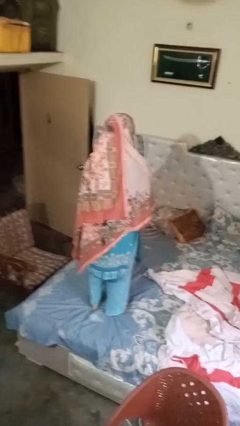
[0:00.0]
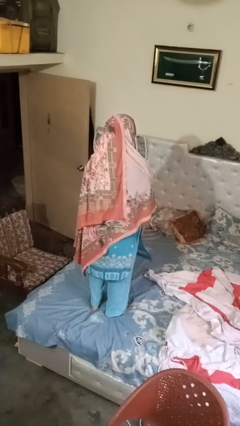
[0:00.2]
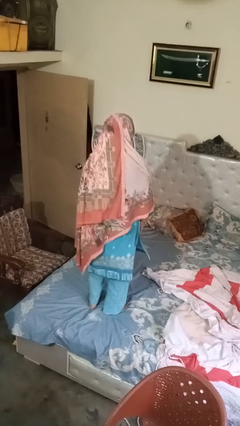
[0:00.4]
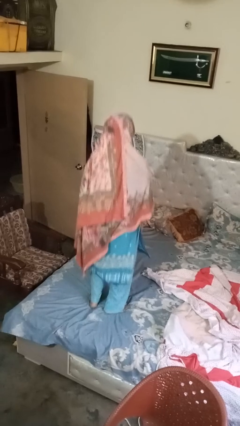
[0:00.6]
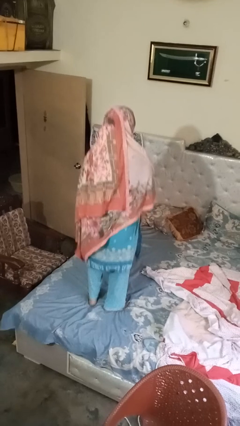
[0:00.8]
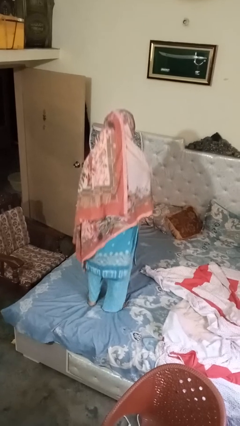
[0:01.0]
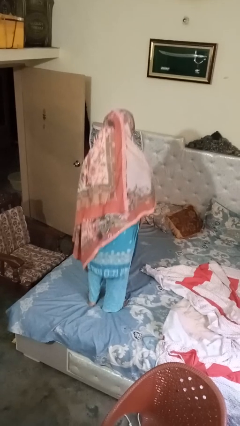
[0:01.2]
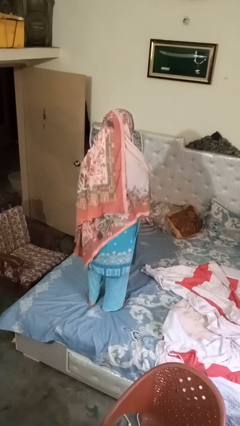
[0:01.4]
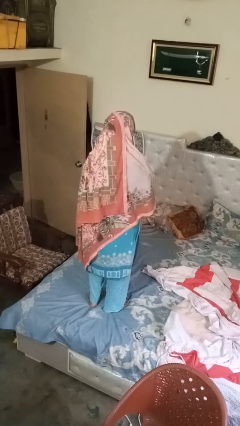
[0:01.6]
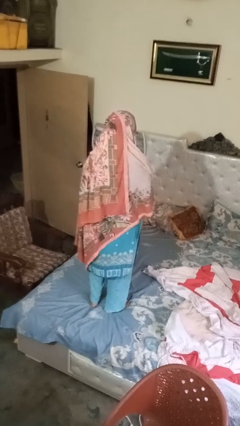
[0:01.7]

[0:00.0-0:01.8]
person jumps on bed

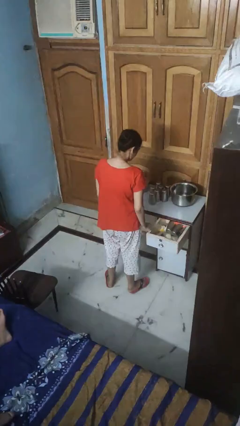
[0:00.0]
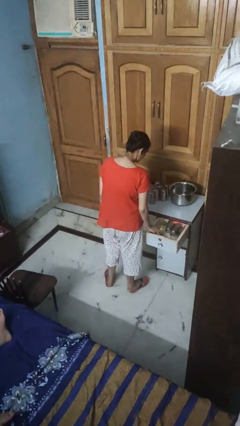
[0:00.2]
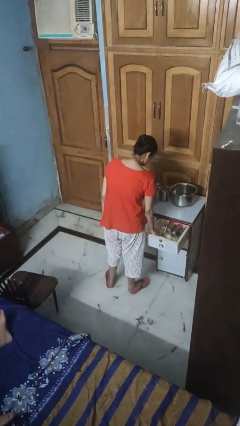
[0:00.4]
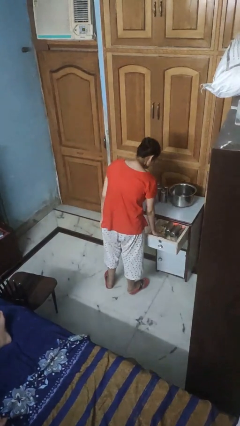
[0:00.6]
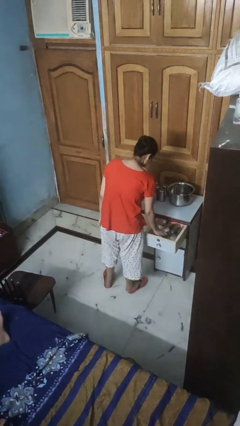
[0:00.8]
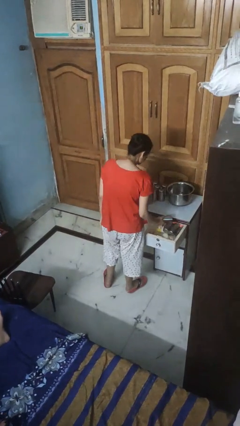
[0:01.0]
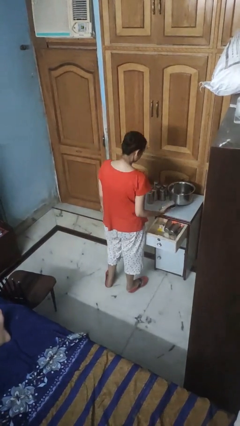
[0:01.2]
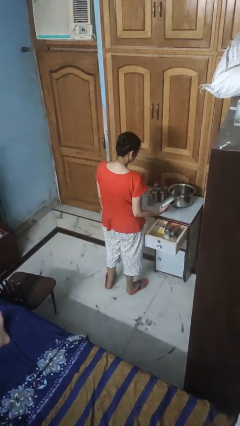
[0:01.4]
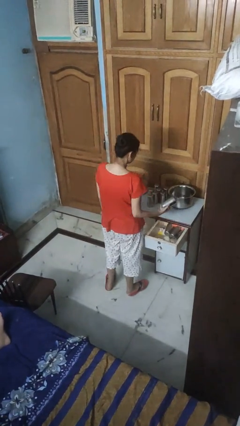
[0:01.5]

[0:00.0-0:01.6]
person takes object from kitchen drawer

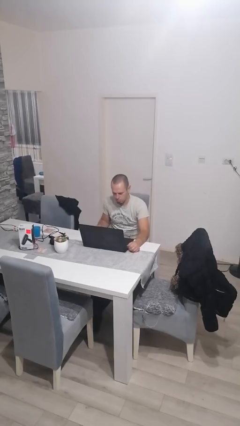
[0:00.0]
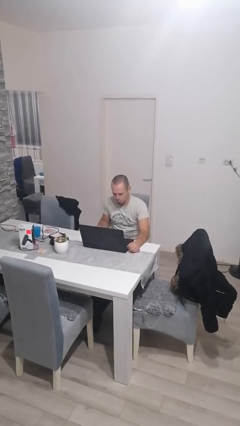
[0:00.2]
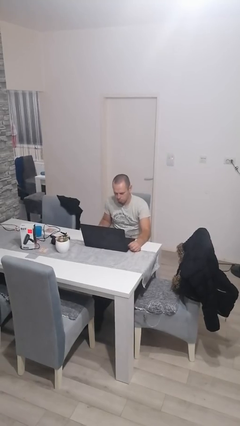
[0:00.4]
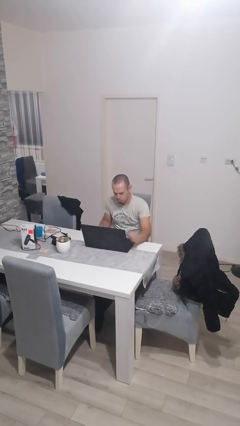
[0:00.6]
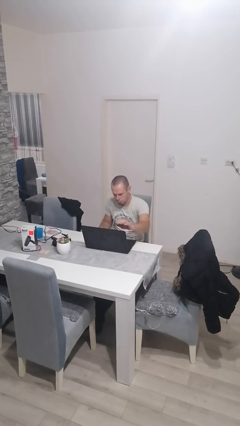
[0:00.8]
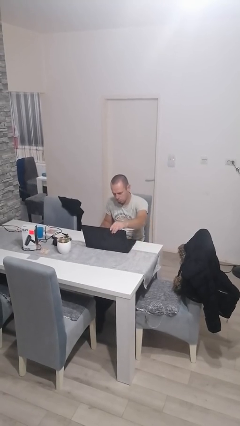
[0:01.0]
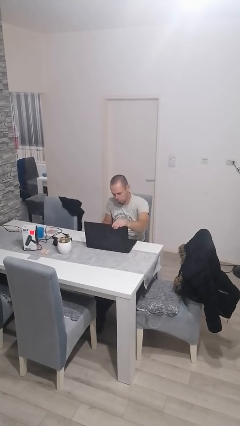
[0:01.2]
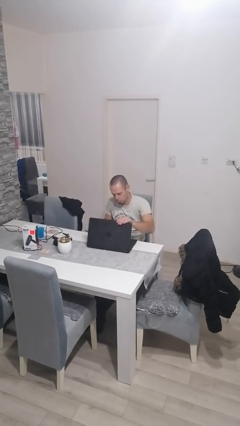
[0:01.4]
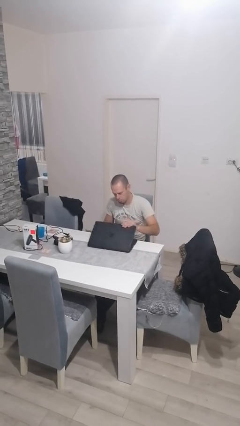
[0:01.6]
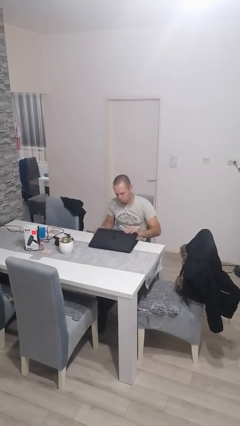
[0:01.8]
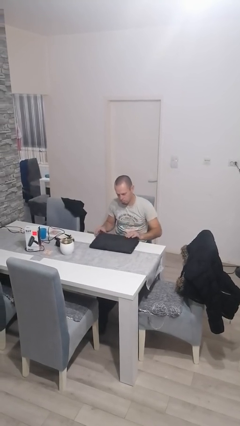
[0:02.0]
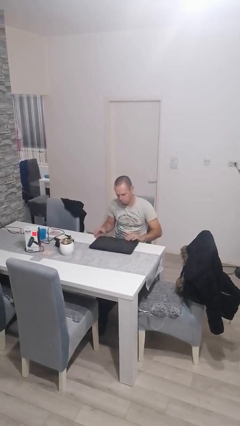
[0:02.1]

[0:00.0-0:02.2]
person closes laptop

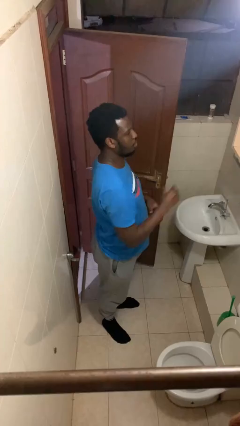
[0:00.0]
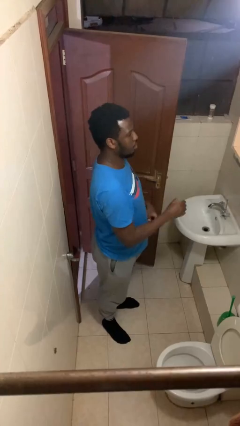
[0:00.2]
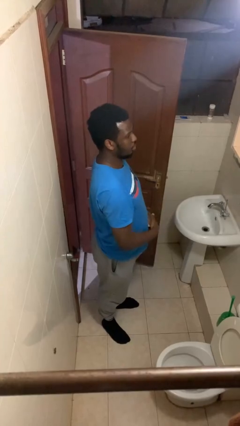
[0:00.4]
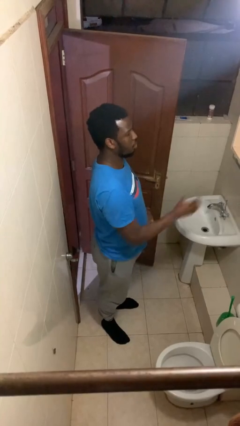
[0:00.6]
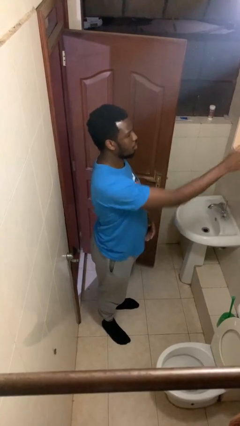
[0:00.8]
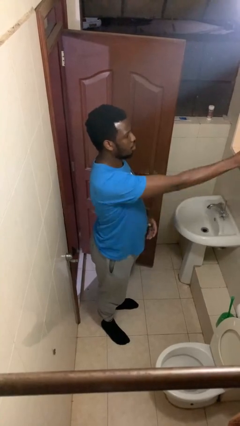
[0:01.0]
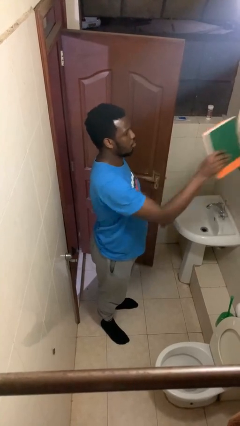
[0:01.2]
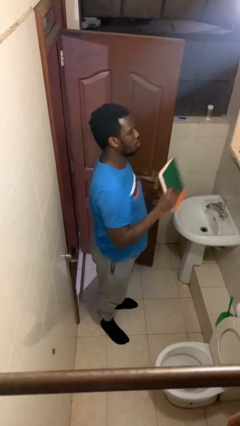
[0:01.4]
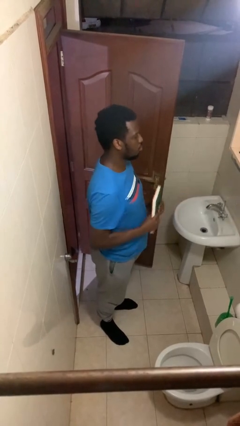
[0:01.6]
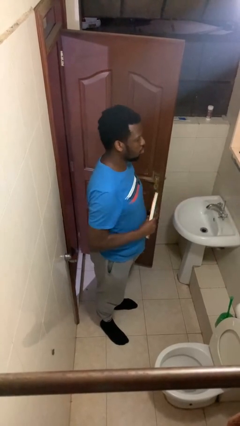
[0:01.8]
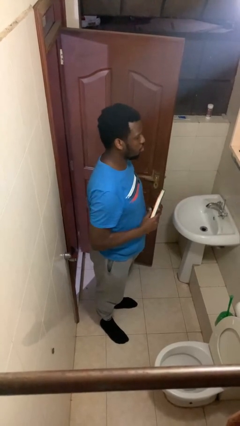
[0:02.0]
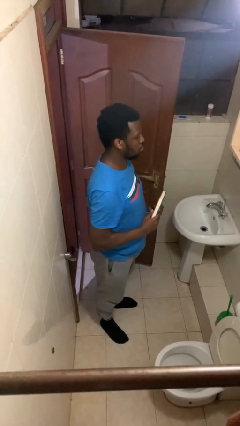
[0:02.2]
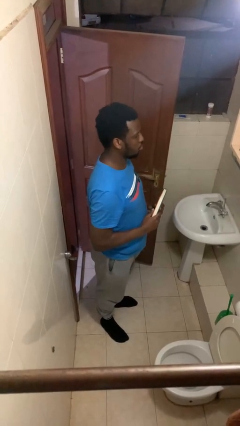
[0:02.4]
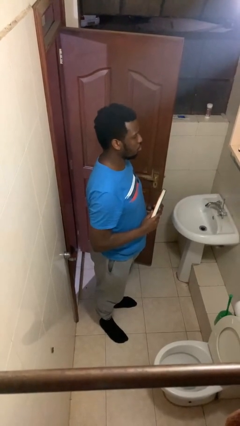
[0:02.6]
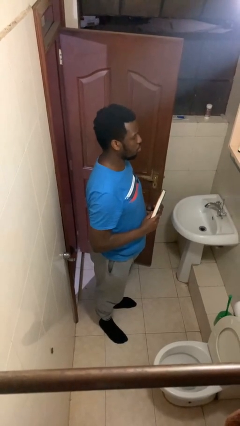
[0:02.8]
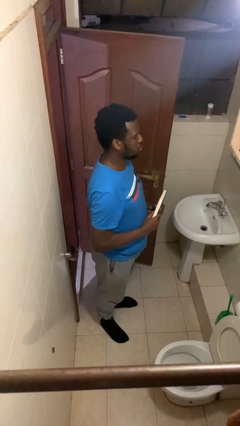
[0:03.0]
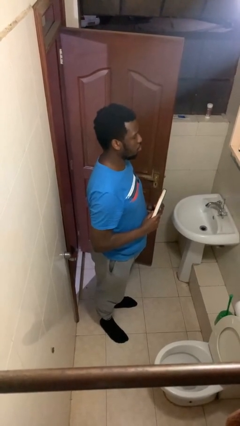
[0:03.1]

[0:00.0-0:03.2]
person picks up object from cabinet

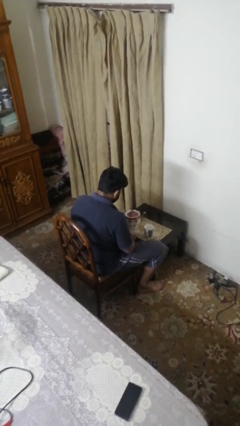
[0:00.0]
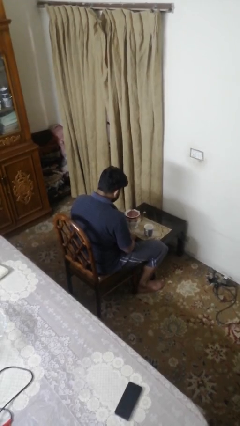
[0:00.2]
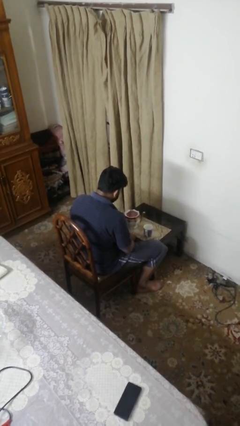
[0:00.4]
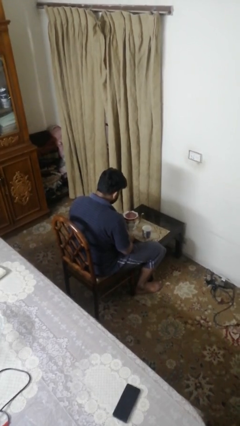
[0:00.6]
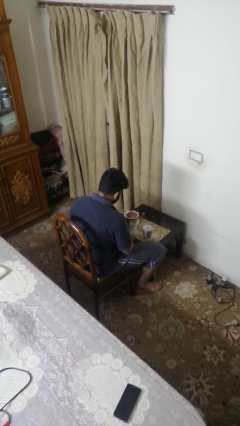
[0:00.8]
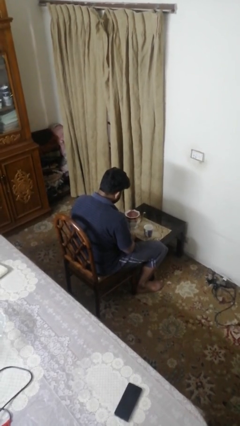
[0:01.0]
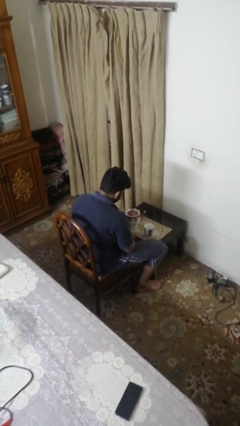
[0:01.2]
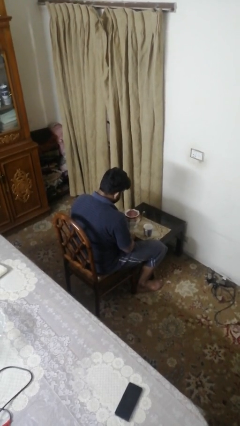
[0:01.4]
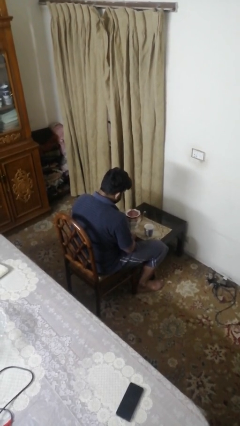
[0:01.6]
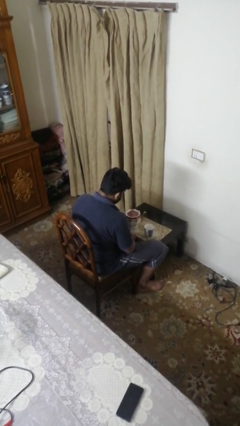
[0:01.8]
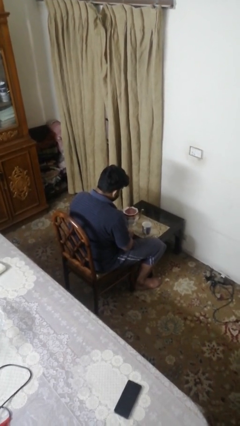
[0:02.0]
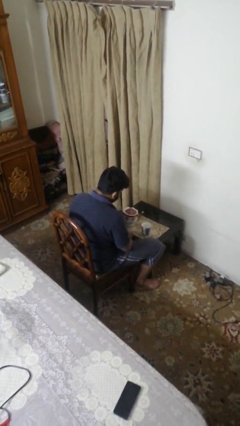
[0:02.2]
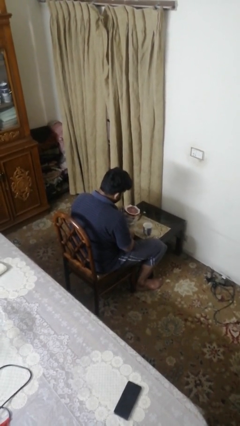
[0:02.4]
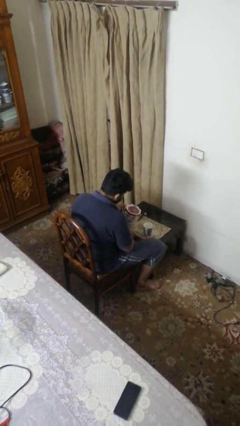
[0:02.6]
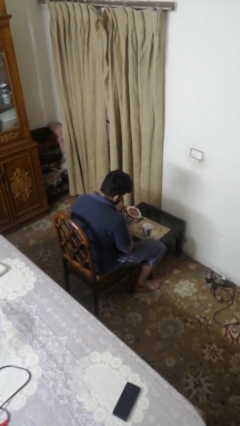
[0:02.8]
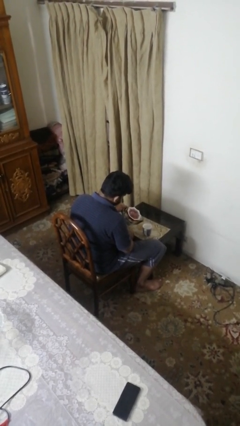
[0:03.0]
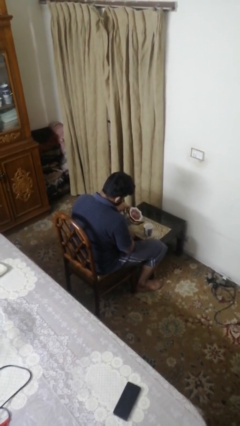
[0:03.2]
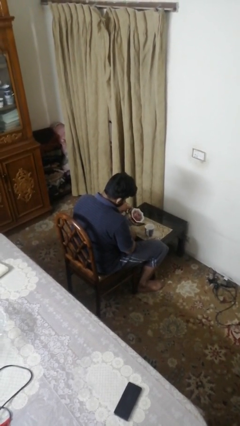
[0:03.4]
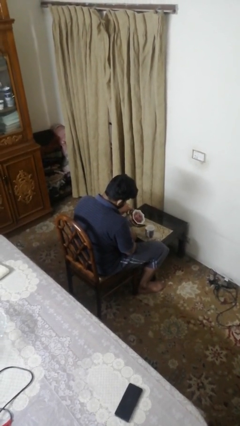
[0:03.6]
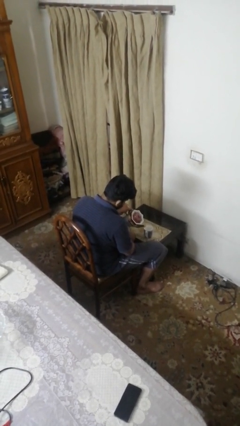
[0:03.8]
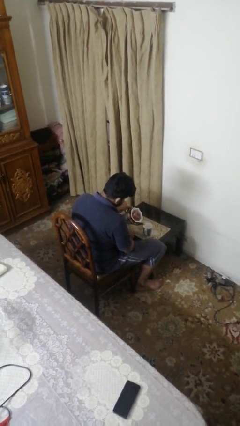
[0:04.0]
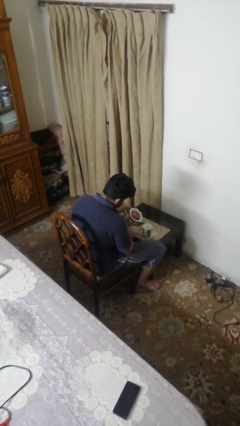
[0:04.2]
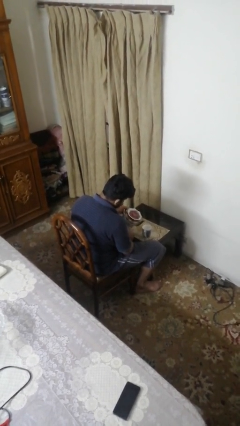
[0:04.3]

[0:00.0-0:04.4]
person pours coffee into mug

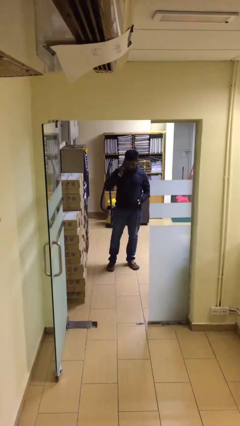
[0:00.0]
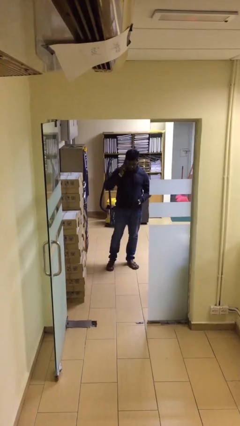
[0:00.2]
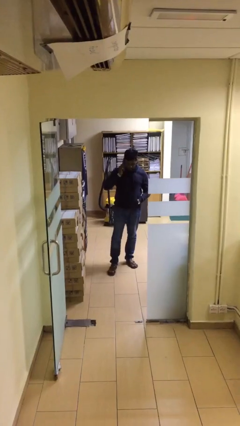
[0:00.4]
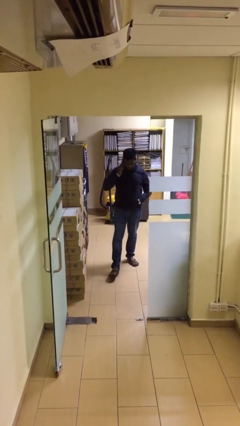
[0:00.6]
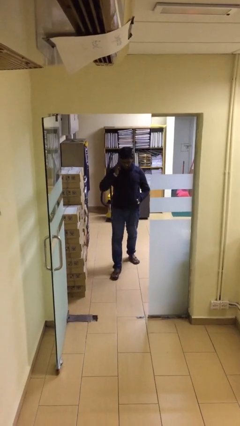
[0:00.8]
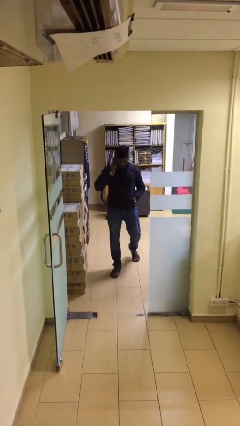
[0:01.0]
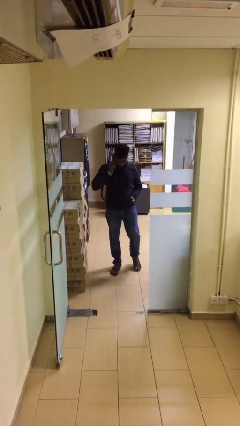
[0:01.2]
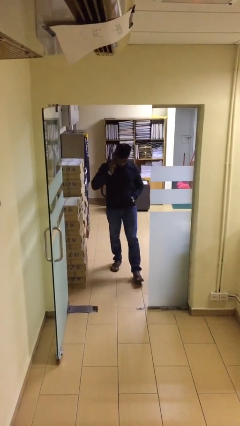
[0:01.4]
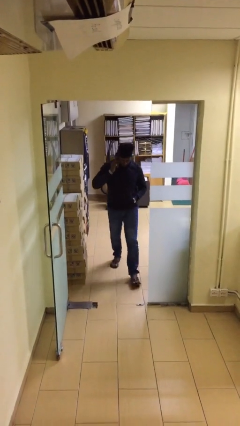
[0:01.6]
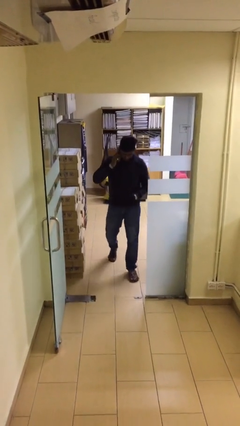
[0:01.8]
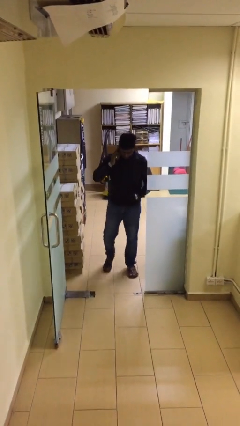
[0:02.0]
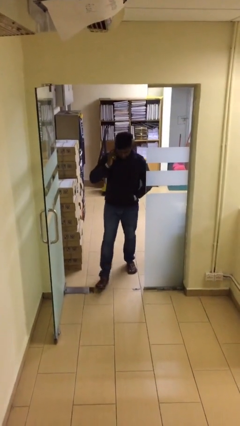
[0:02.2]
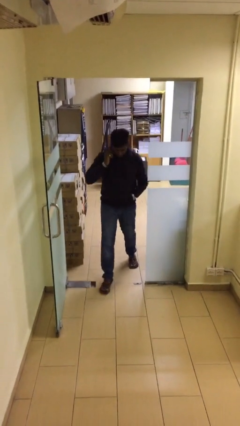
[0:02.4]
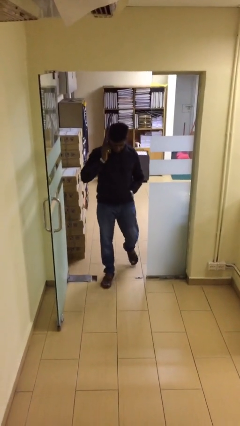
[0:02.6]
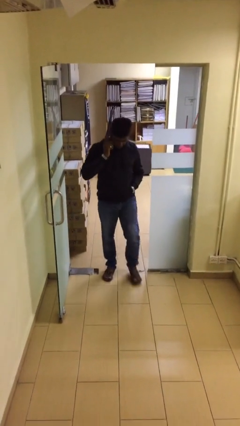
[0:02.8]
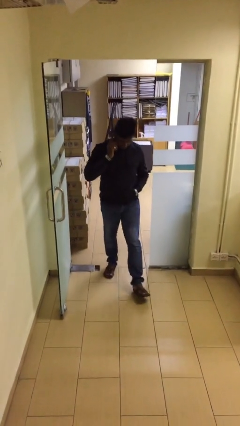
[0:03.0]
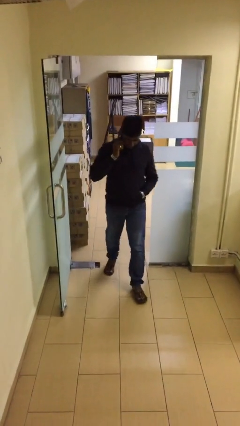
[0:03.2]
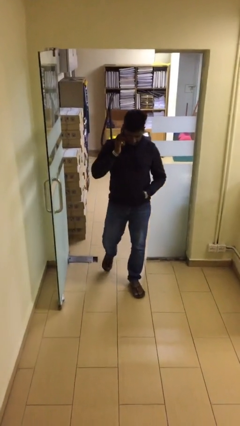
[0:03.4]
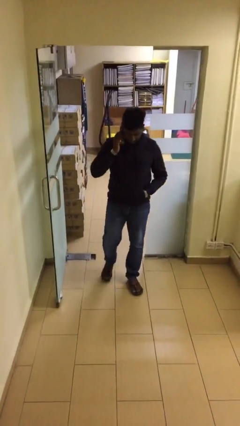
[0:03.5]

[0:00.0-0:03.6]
person enters scene through structure

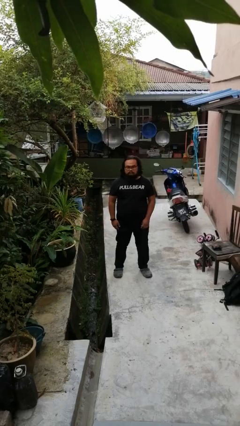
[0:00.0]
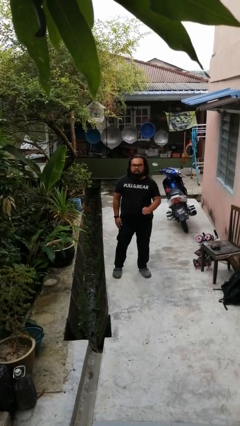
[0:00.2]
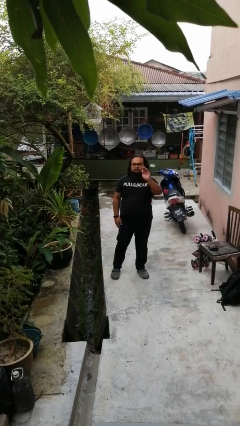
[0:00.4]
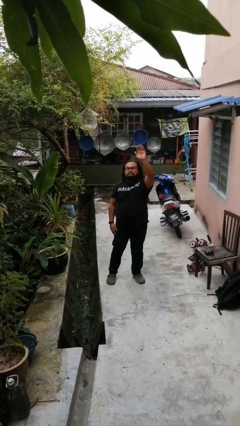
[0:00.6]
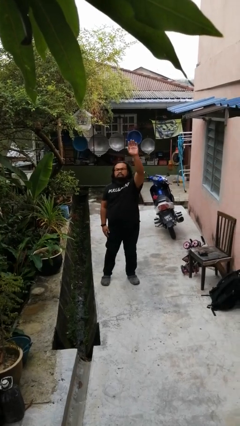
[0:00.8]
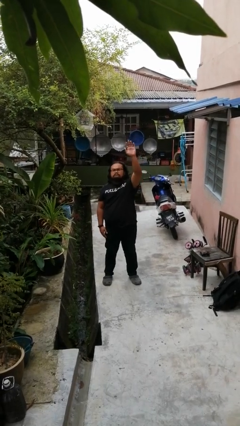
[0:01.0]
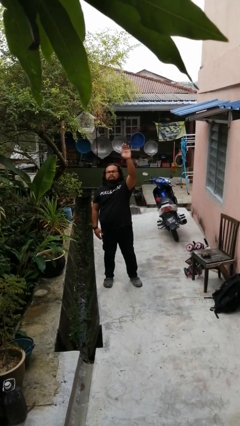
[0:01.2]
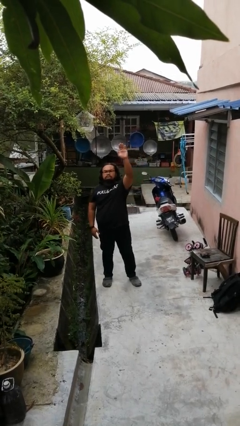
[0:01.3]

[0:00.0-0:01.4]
person gestures raise hand
